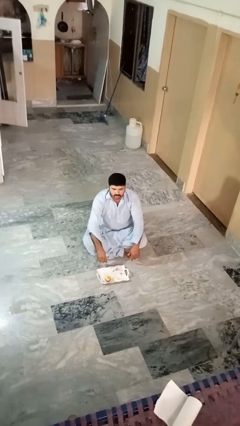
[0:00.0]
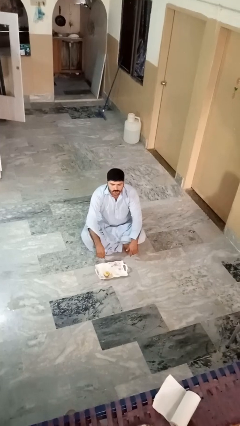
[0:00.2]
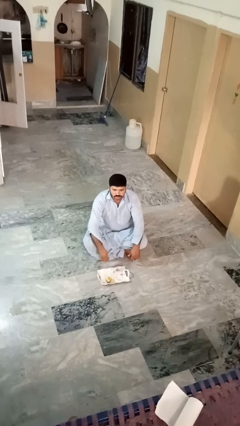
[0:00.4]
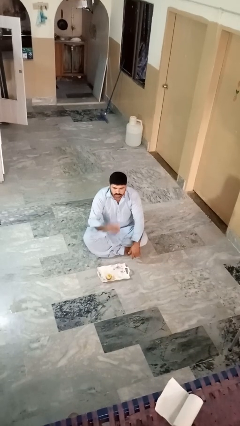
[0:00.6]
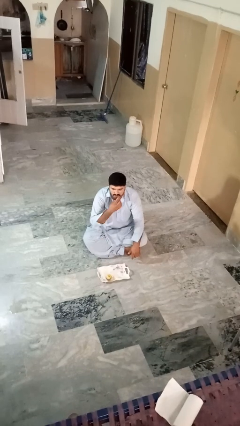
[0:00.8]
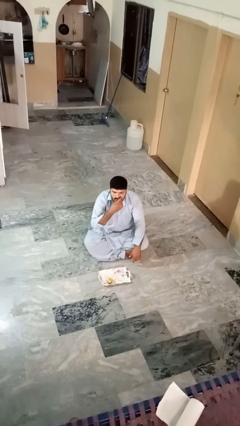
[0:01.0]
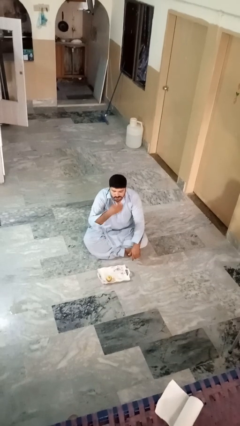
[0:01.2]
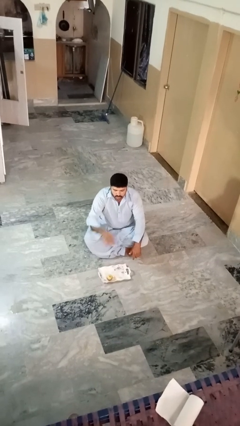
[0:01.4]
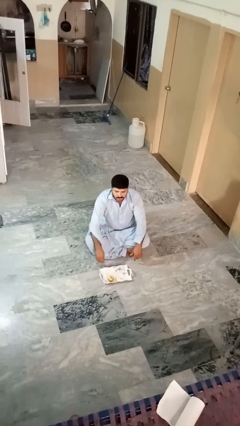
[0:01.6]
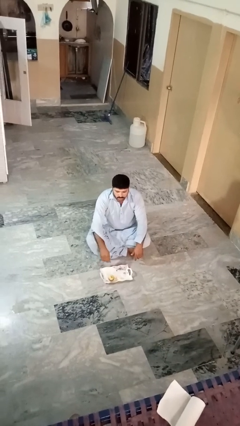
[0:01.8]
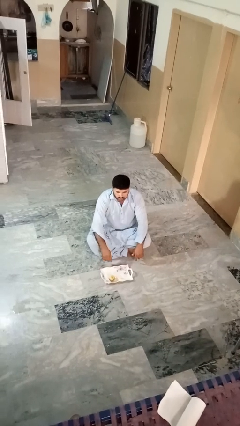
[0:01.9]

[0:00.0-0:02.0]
person eats apple

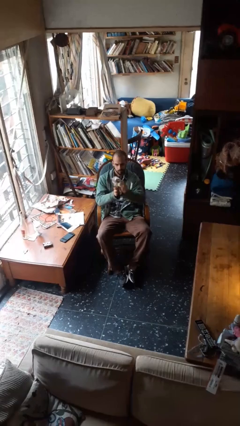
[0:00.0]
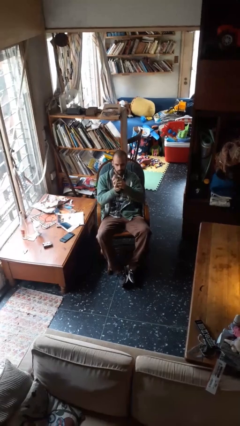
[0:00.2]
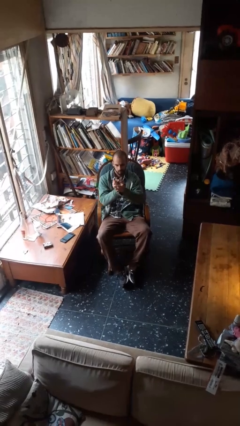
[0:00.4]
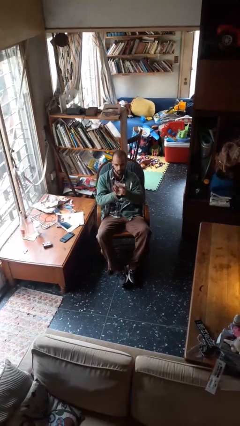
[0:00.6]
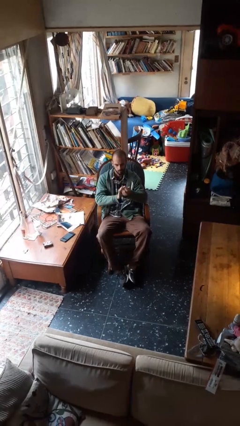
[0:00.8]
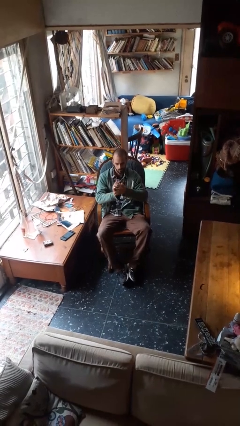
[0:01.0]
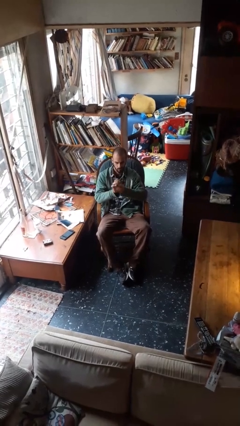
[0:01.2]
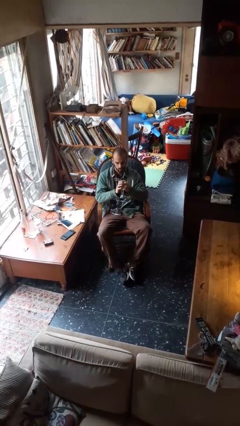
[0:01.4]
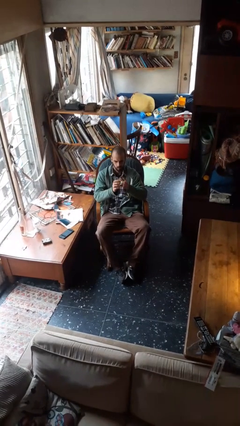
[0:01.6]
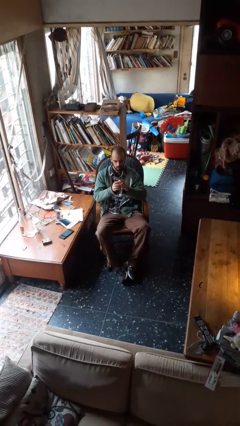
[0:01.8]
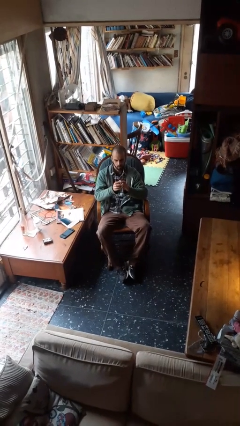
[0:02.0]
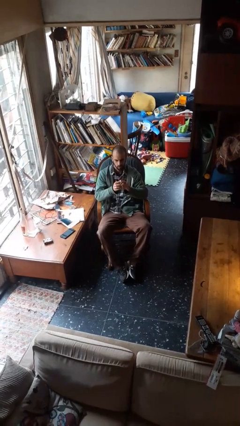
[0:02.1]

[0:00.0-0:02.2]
person crumples paper

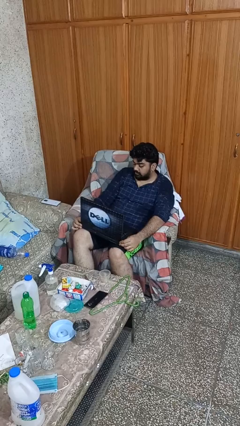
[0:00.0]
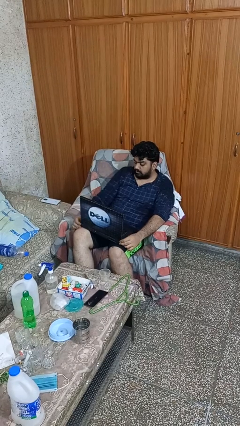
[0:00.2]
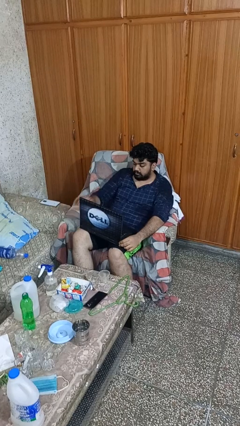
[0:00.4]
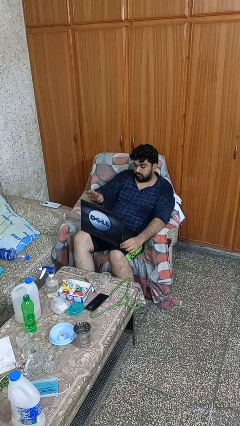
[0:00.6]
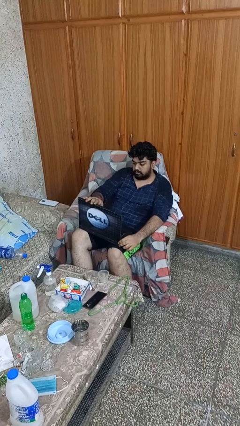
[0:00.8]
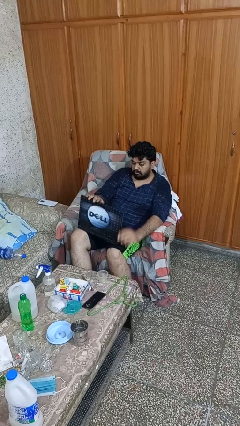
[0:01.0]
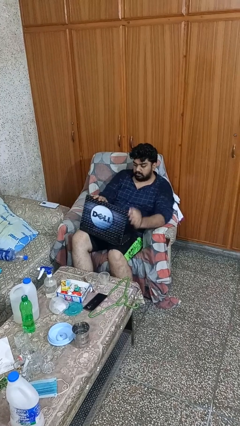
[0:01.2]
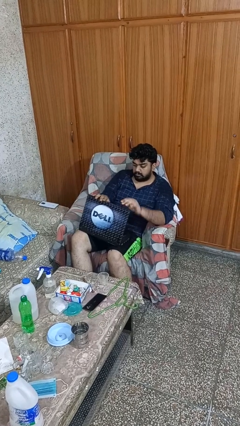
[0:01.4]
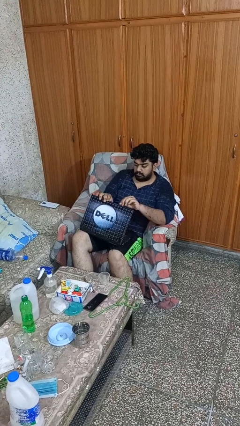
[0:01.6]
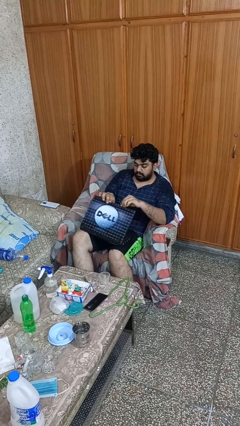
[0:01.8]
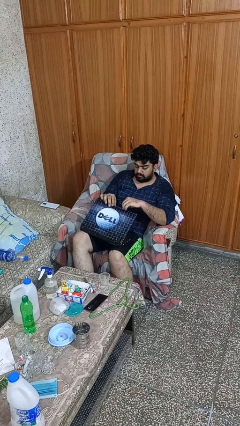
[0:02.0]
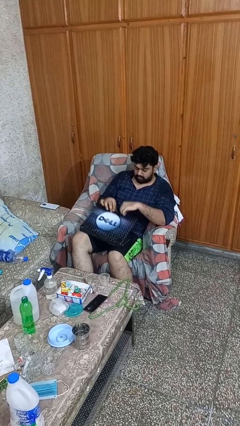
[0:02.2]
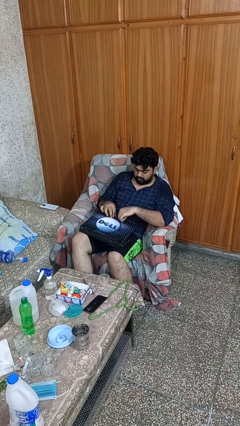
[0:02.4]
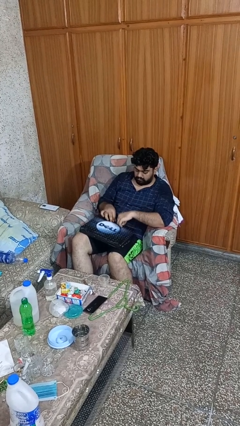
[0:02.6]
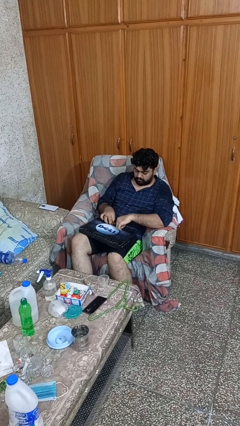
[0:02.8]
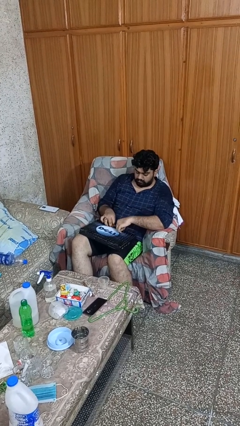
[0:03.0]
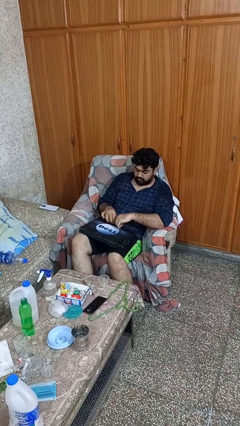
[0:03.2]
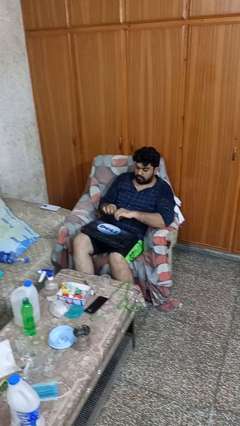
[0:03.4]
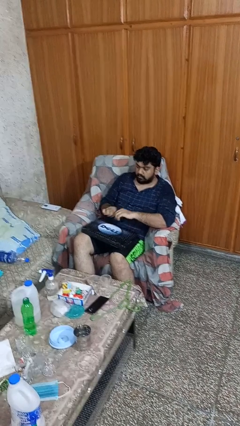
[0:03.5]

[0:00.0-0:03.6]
person closes laptop

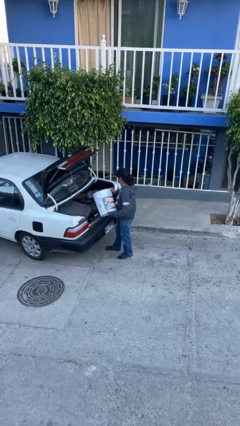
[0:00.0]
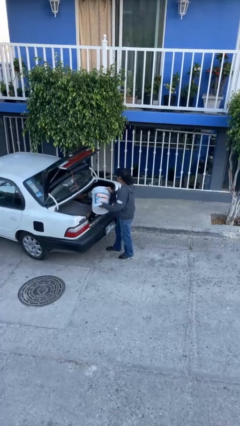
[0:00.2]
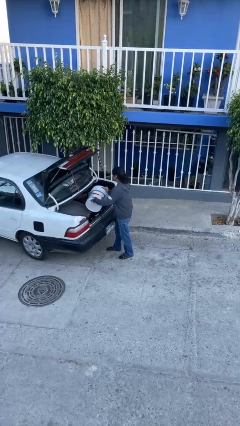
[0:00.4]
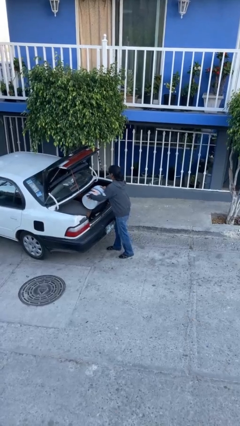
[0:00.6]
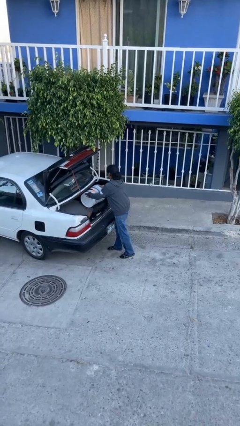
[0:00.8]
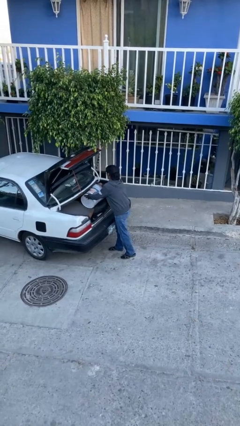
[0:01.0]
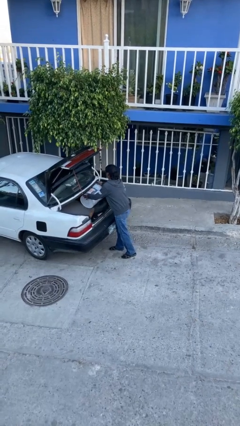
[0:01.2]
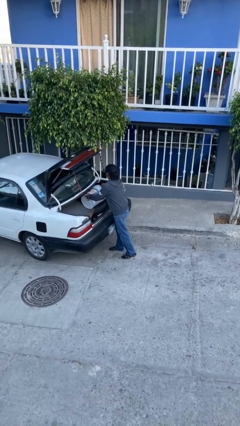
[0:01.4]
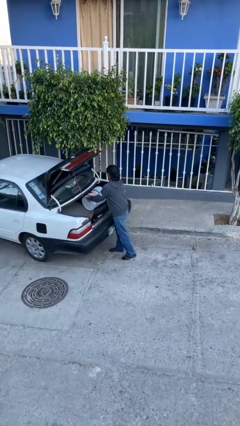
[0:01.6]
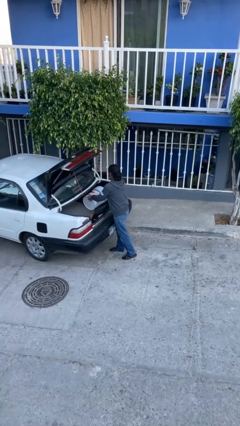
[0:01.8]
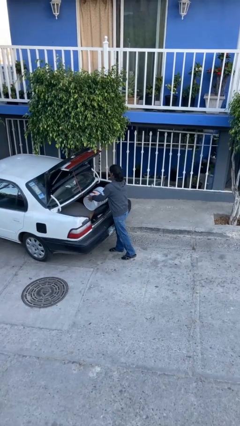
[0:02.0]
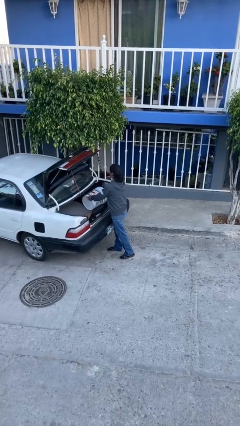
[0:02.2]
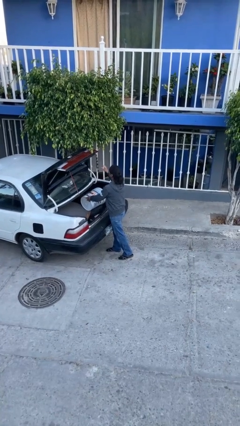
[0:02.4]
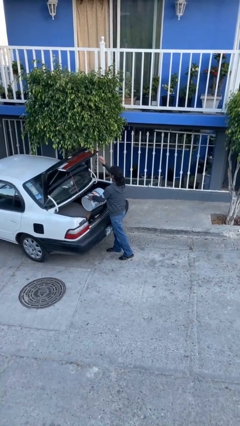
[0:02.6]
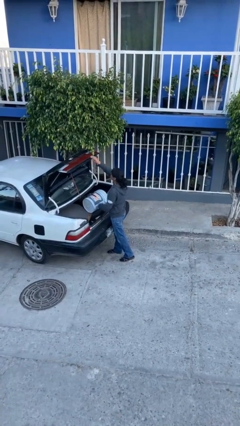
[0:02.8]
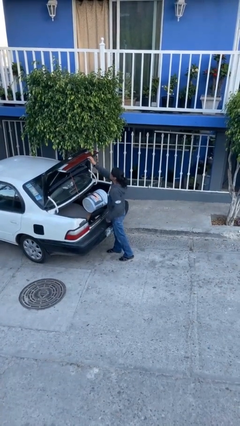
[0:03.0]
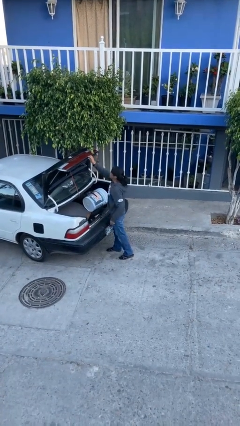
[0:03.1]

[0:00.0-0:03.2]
person loads car

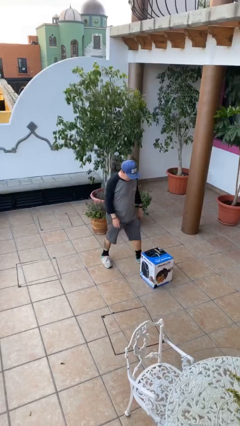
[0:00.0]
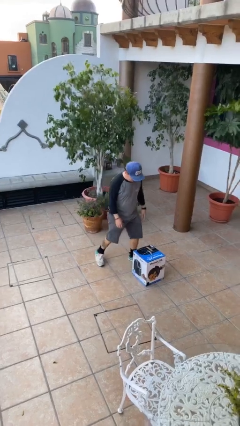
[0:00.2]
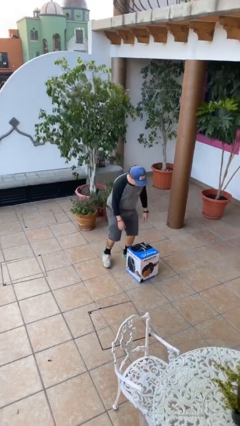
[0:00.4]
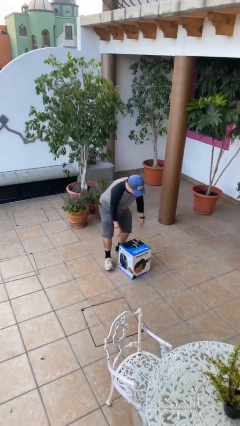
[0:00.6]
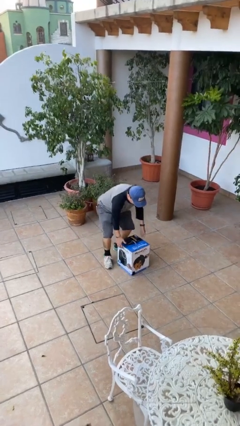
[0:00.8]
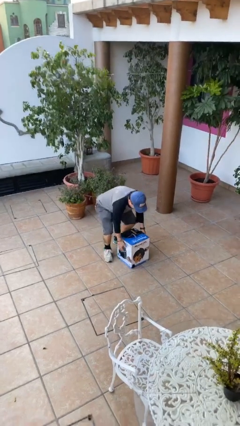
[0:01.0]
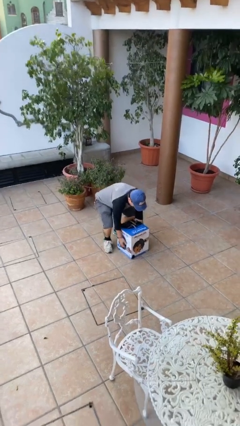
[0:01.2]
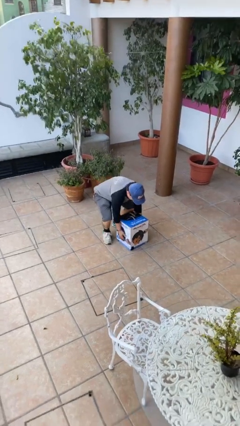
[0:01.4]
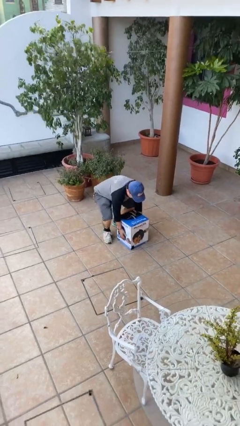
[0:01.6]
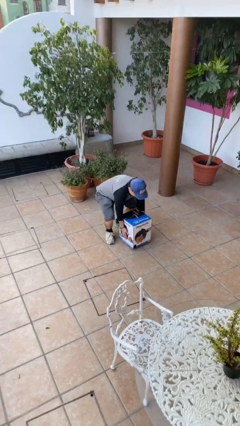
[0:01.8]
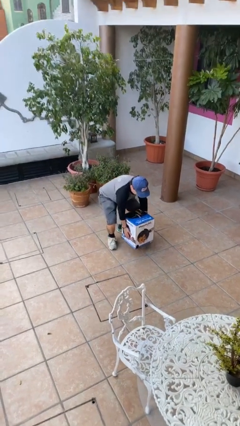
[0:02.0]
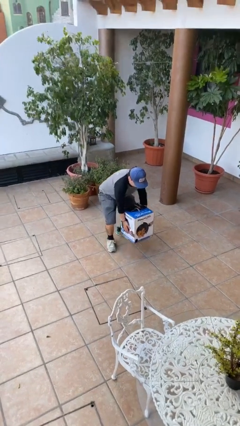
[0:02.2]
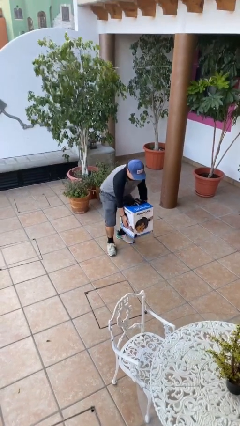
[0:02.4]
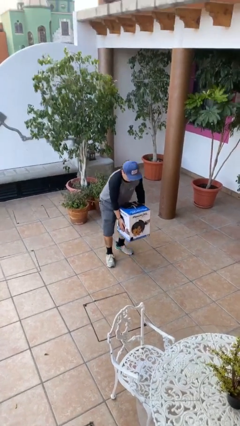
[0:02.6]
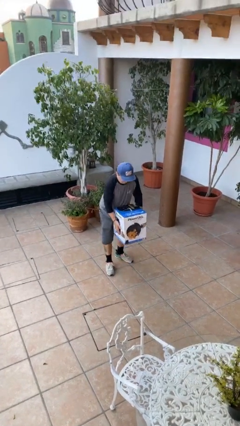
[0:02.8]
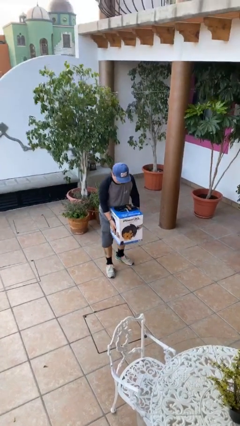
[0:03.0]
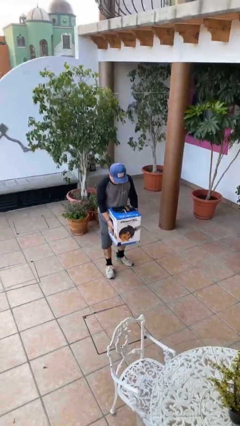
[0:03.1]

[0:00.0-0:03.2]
person picks up object from floor

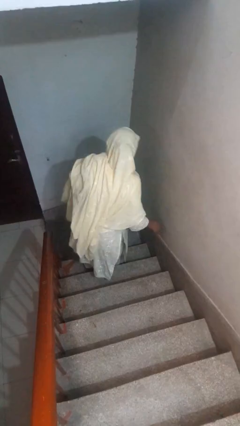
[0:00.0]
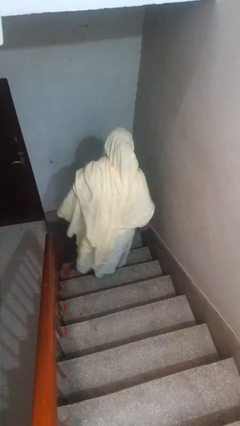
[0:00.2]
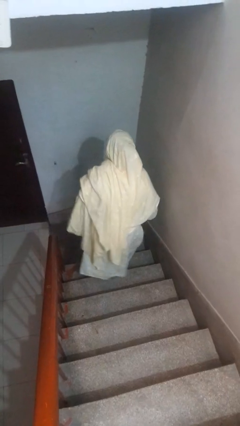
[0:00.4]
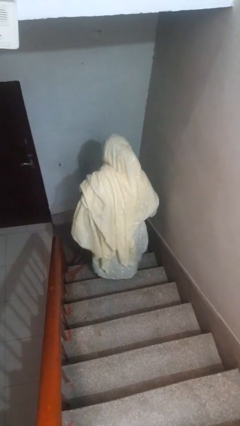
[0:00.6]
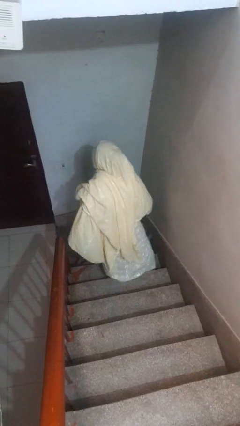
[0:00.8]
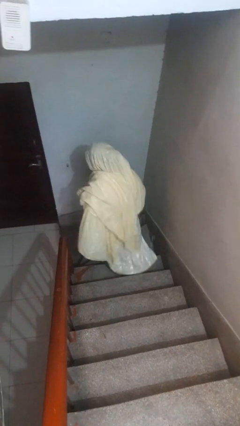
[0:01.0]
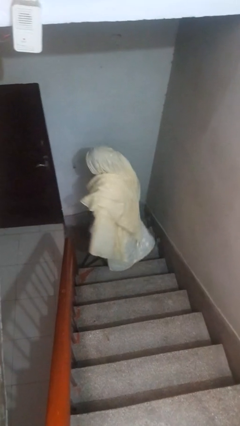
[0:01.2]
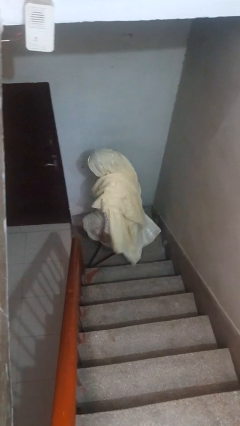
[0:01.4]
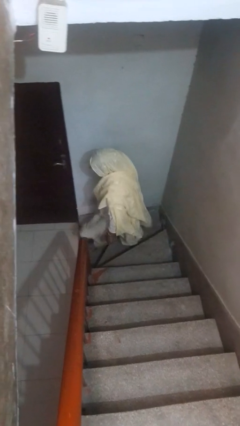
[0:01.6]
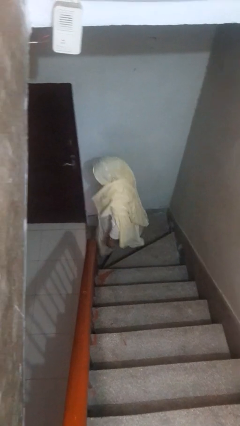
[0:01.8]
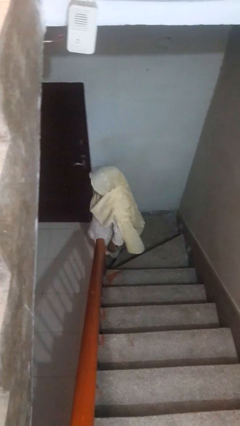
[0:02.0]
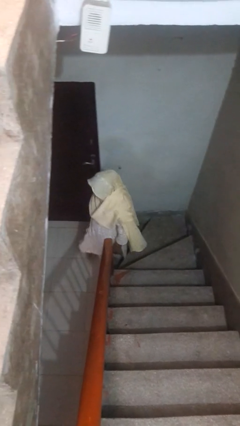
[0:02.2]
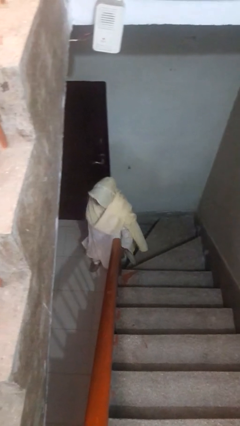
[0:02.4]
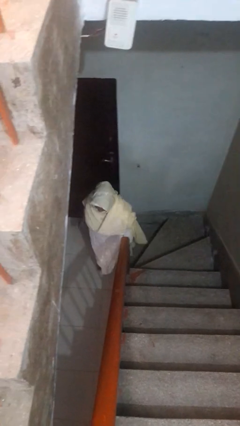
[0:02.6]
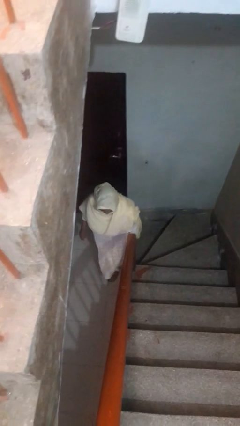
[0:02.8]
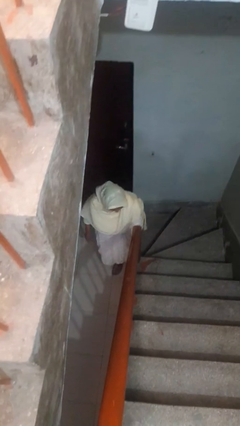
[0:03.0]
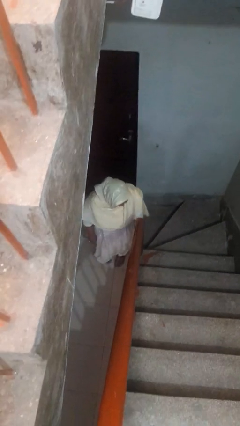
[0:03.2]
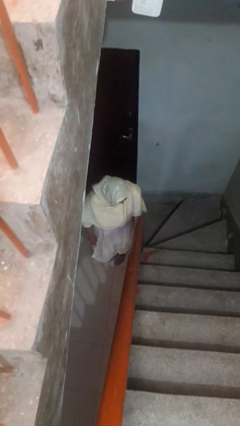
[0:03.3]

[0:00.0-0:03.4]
person climbs down stairs
